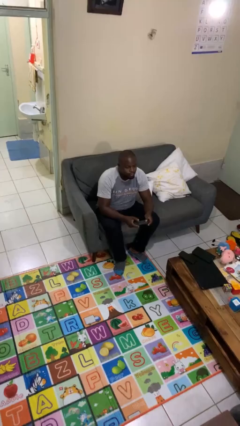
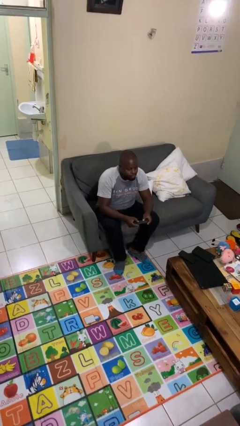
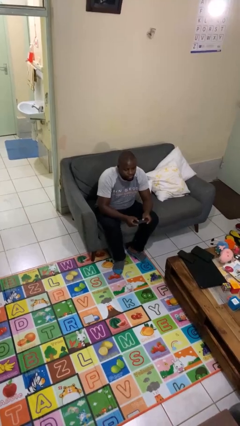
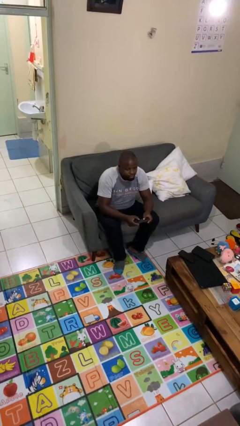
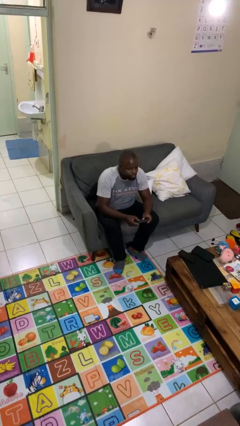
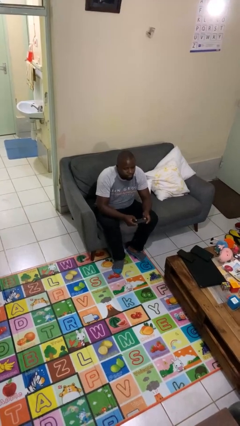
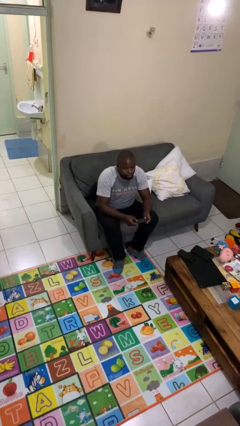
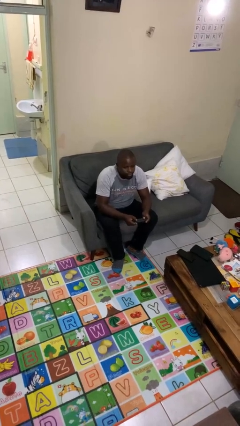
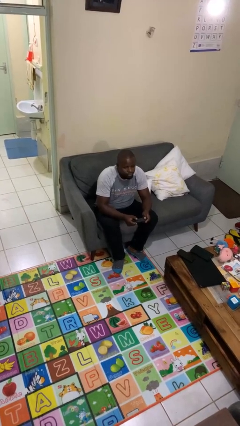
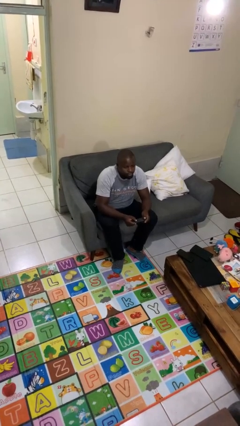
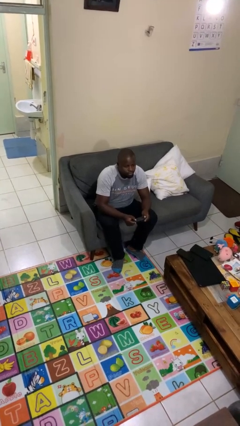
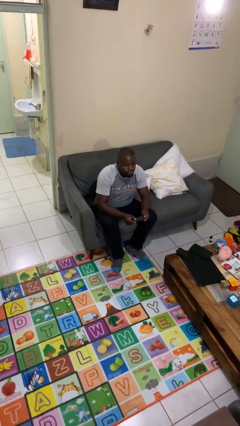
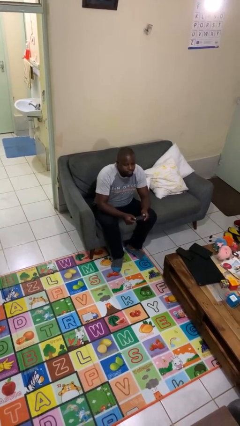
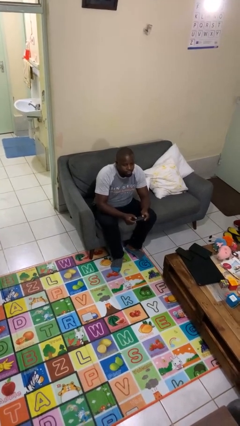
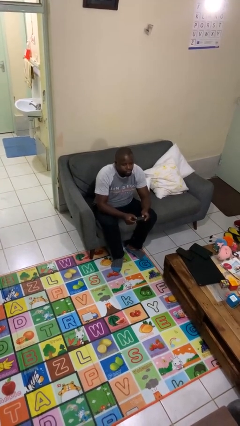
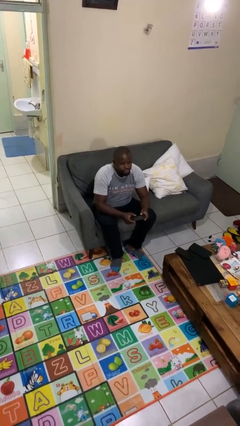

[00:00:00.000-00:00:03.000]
person interacts with handheld game

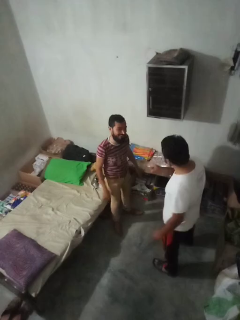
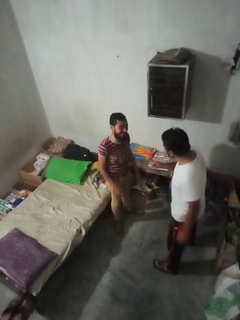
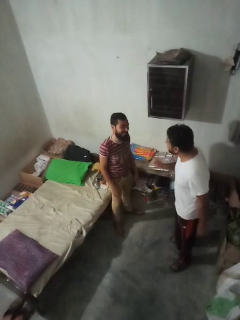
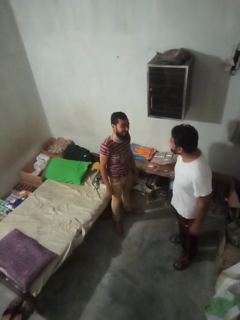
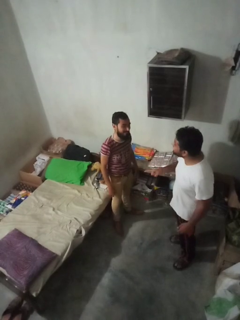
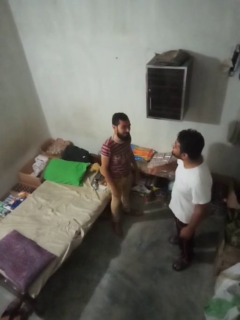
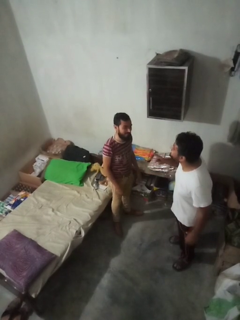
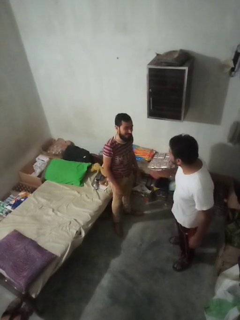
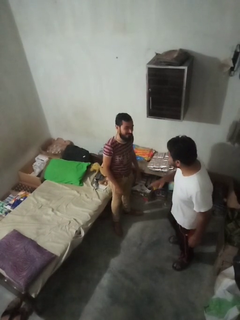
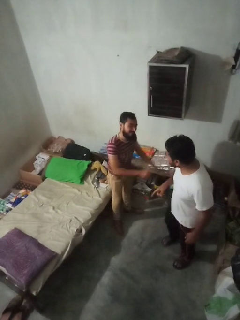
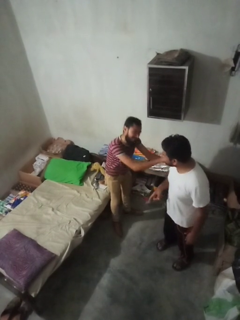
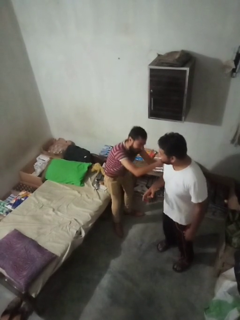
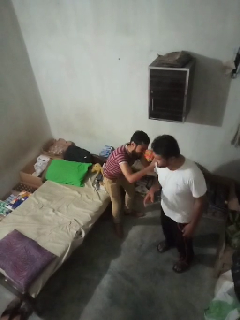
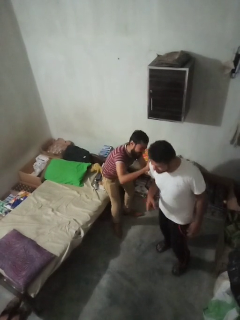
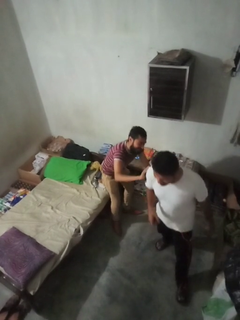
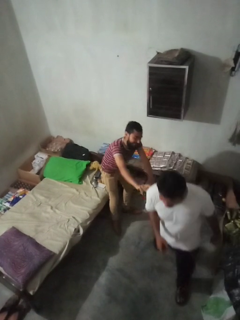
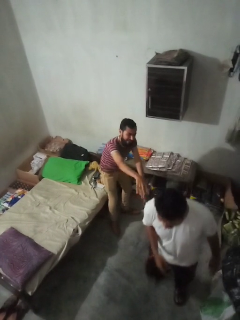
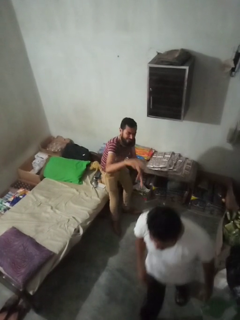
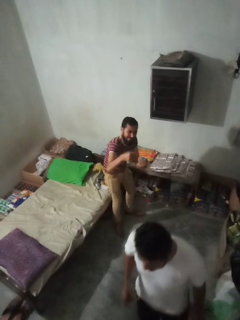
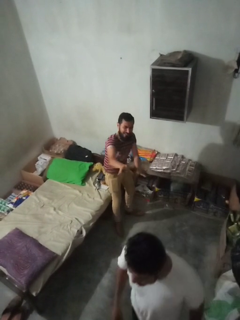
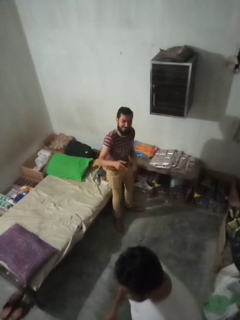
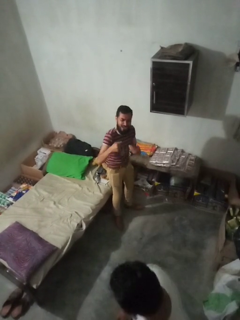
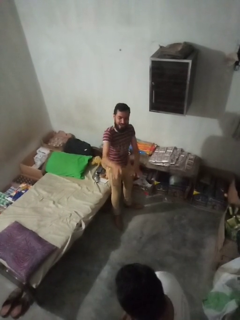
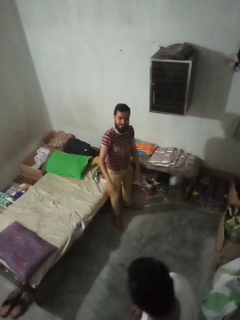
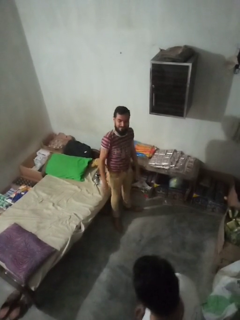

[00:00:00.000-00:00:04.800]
person shoves person

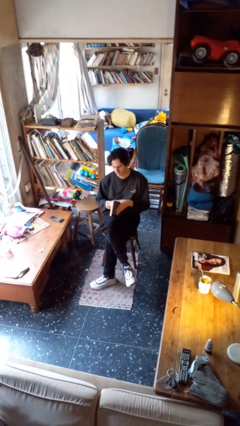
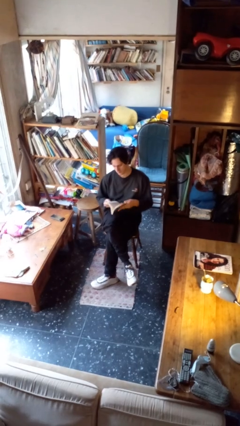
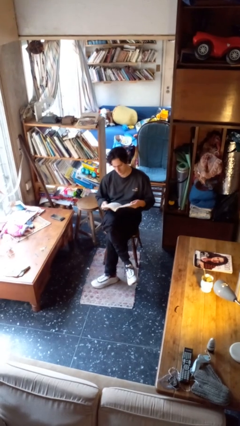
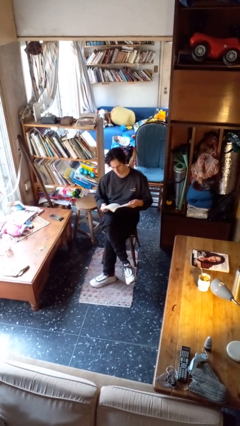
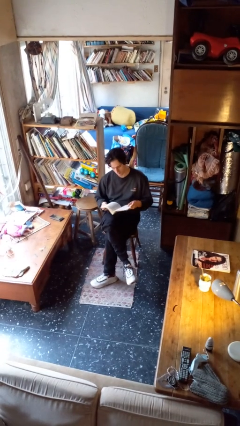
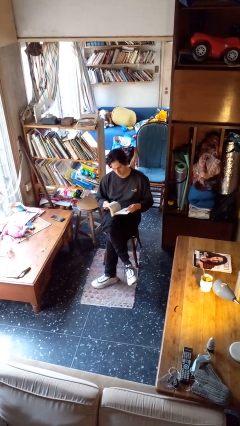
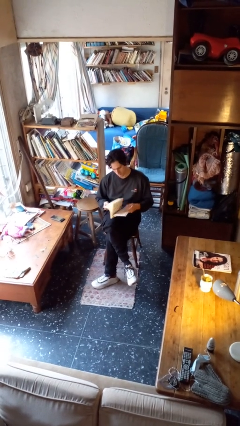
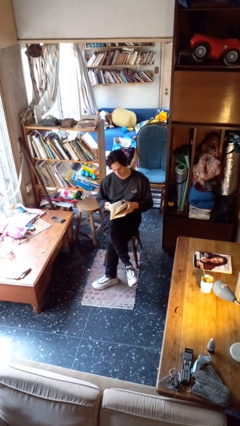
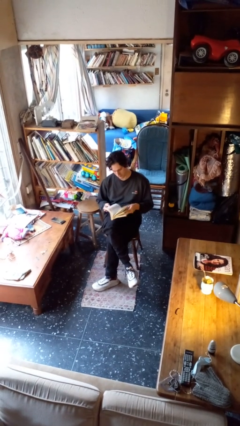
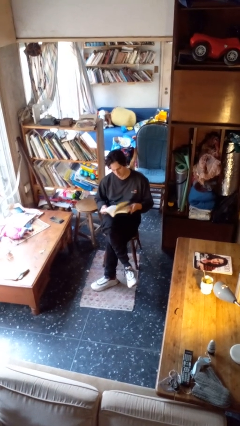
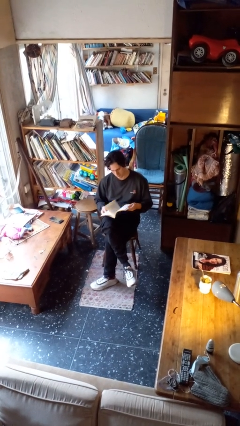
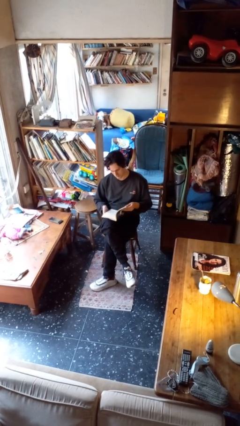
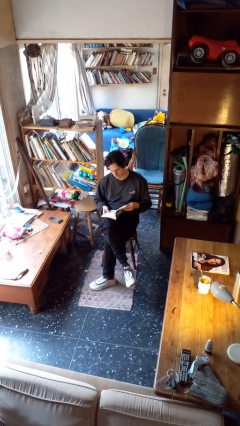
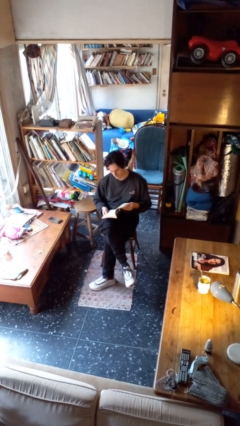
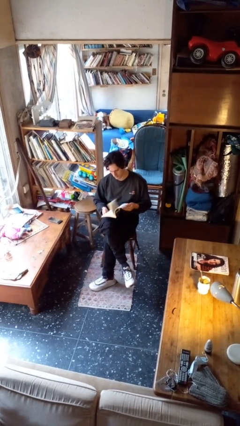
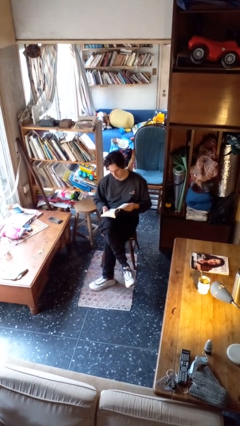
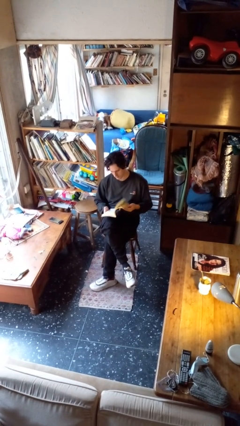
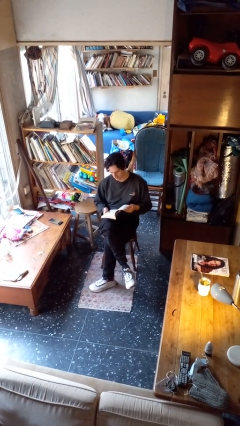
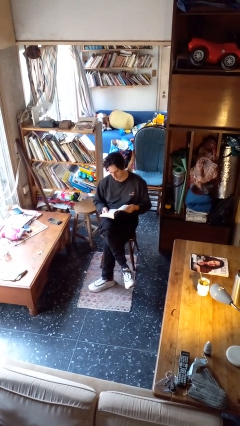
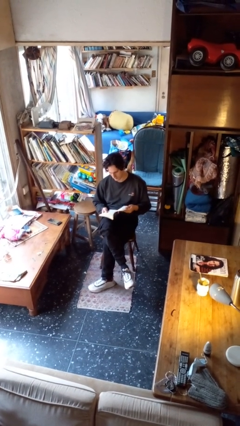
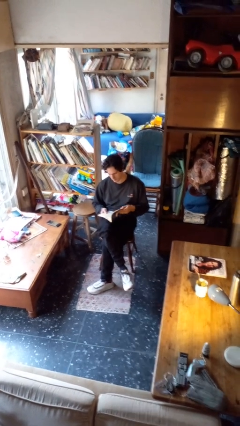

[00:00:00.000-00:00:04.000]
person reads book

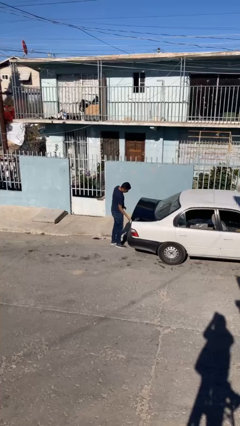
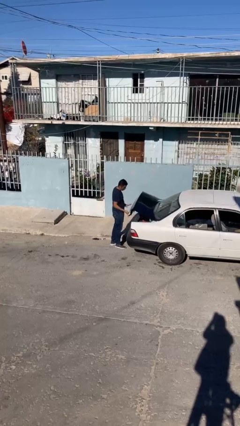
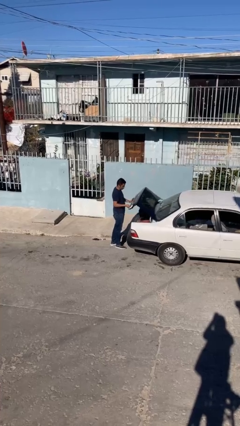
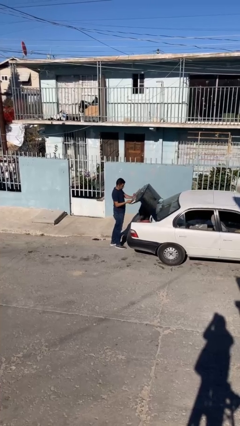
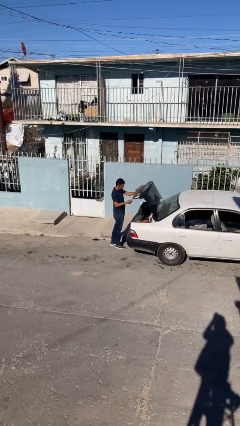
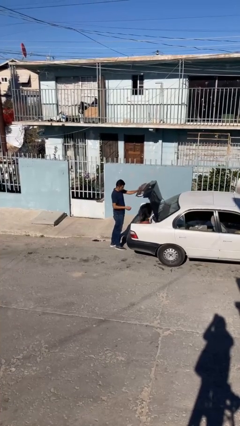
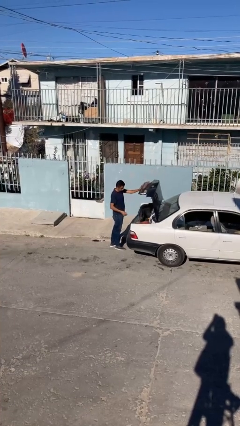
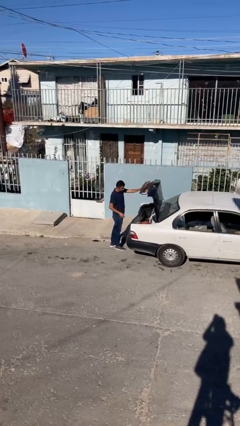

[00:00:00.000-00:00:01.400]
person opens car trunk

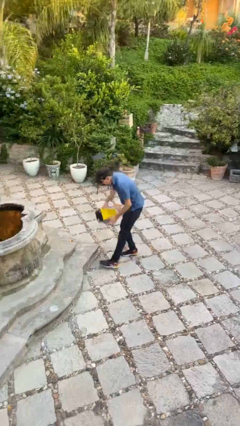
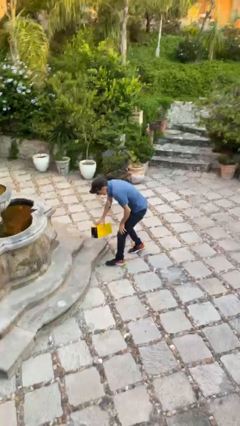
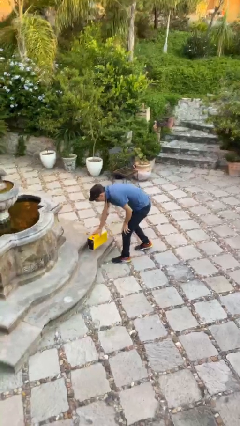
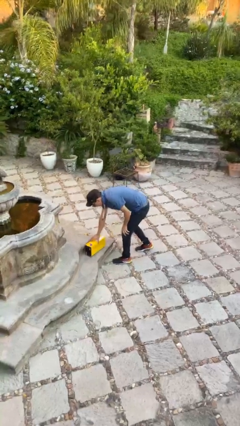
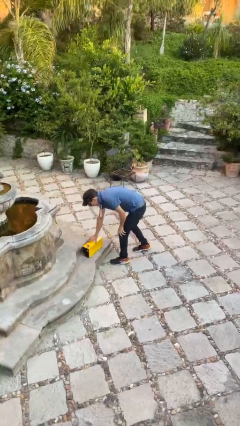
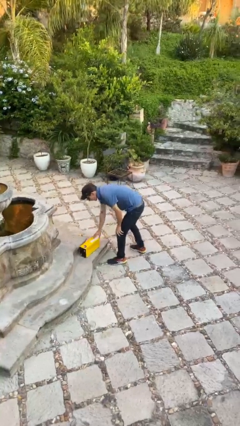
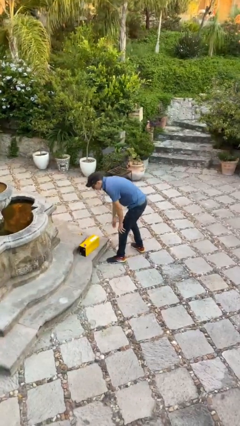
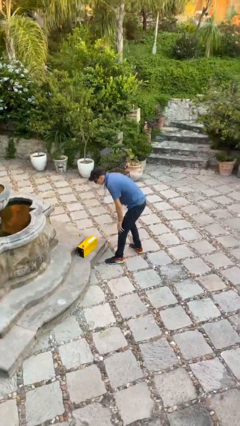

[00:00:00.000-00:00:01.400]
person puts down object on floor

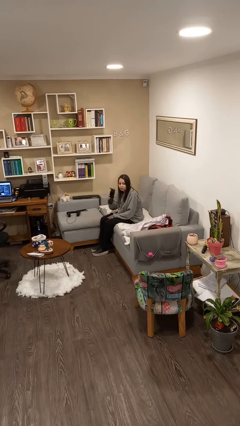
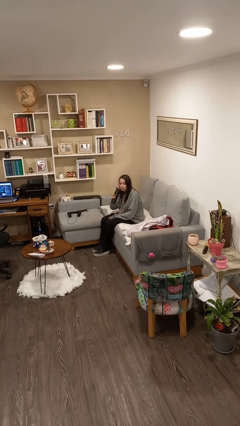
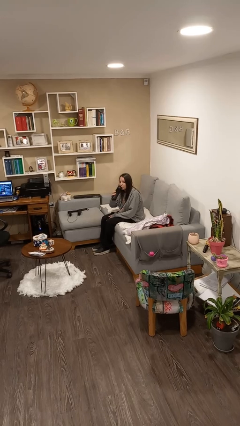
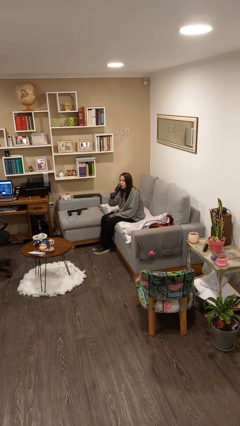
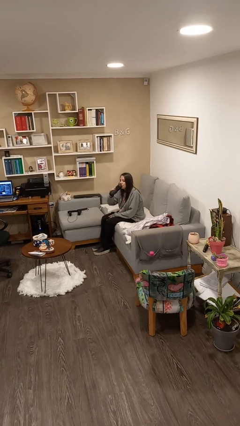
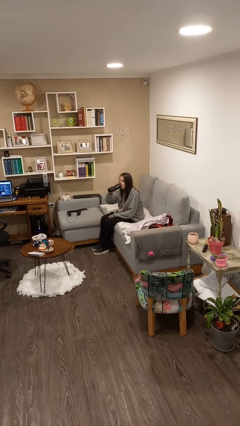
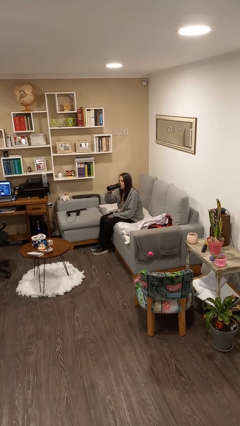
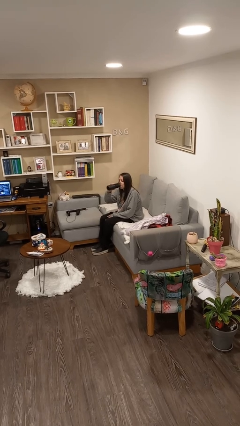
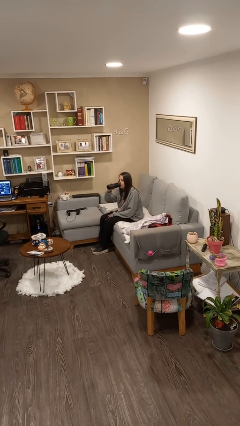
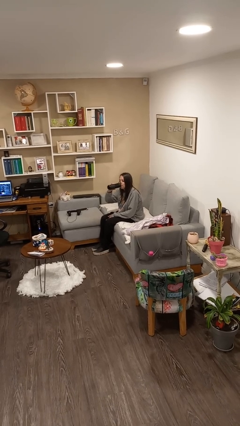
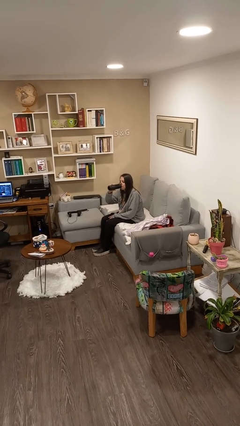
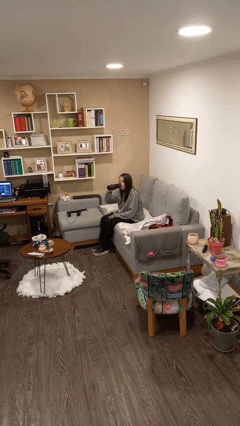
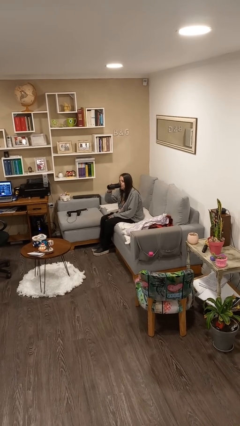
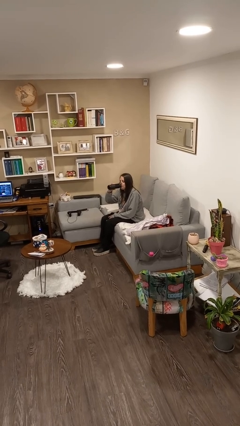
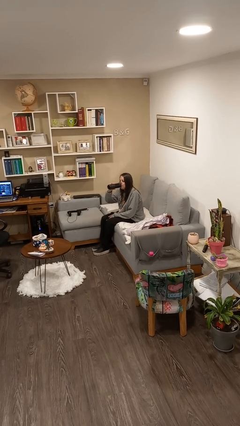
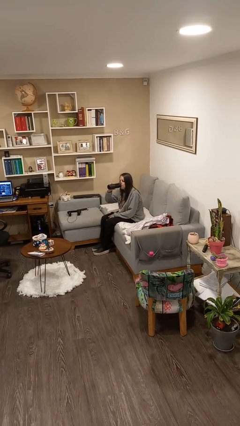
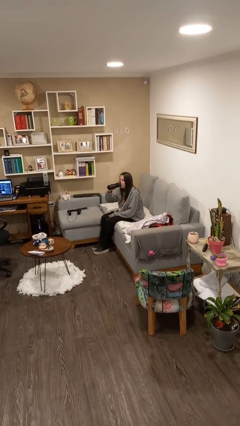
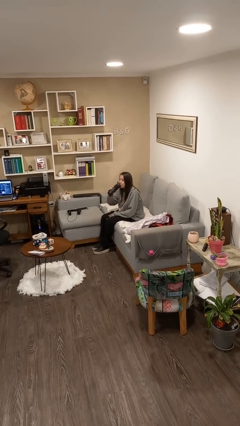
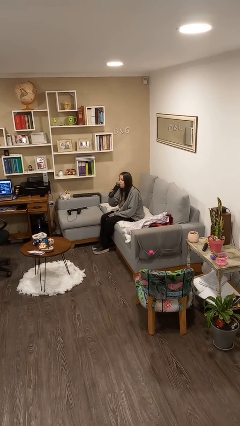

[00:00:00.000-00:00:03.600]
person drinks from bottle

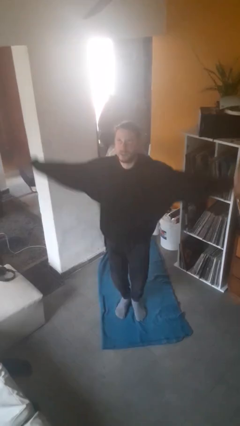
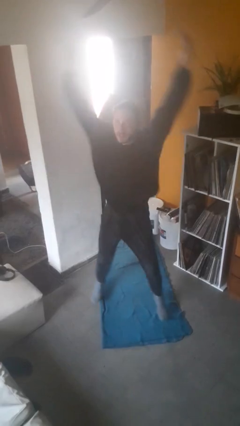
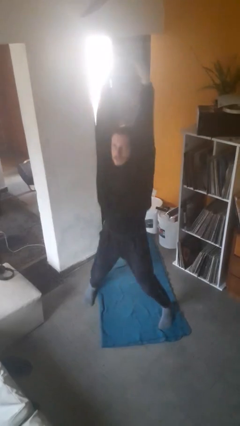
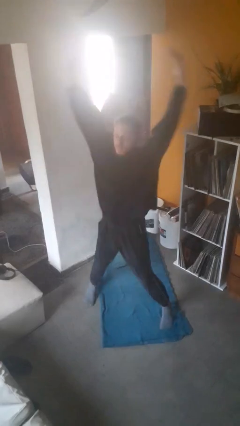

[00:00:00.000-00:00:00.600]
person exercises with jumping jacks
